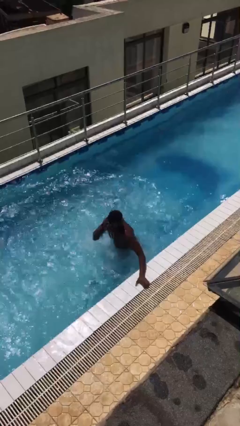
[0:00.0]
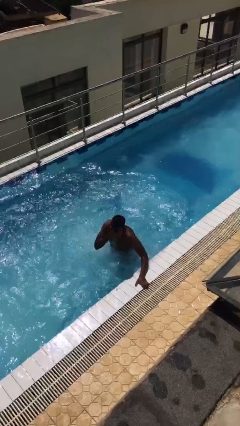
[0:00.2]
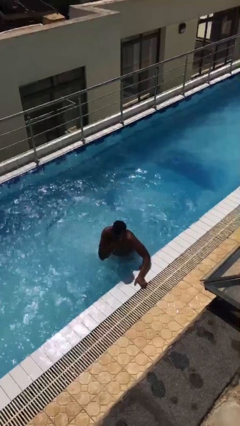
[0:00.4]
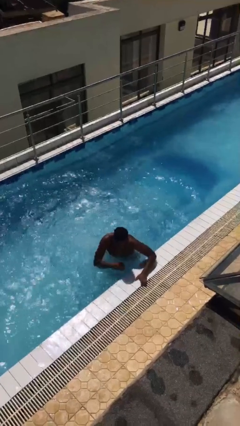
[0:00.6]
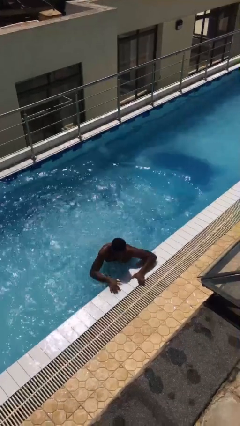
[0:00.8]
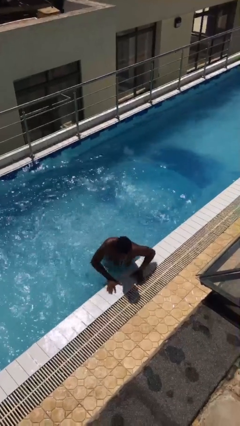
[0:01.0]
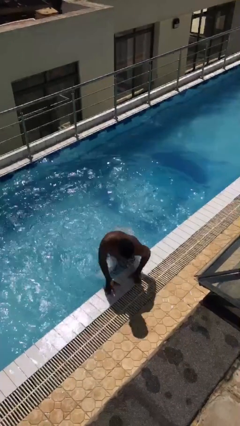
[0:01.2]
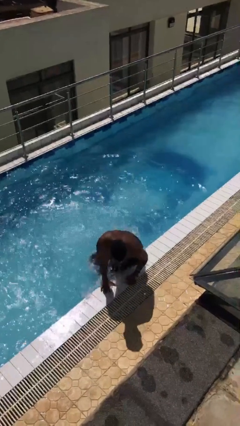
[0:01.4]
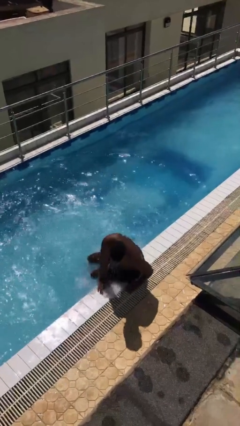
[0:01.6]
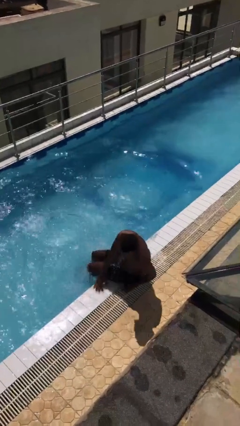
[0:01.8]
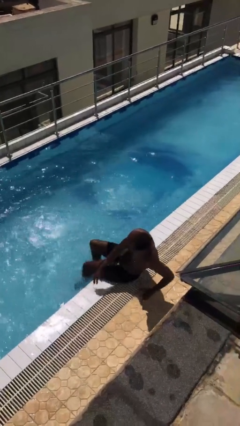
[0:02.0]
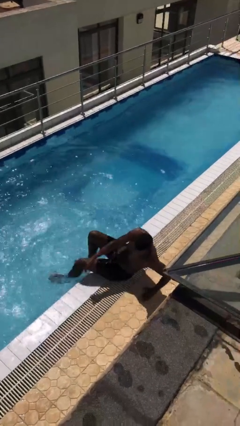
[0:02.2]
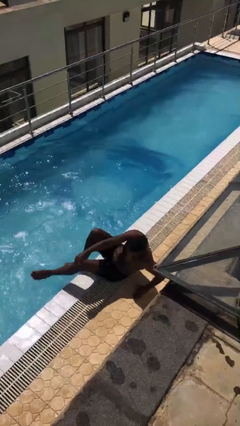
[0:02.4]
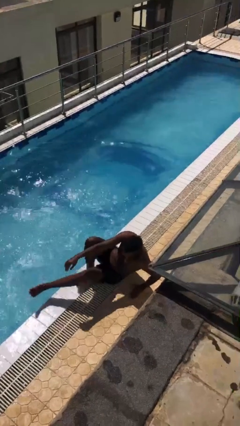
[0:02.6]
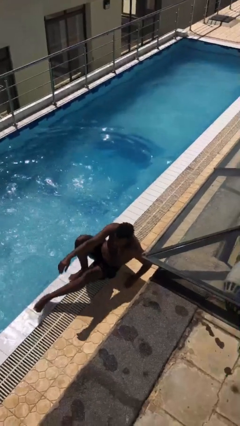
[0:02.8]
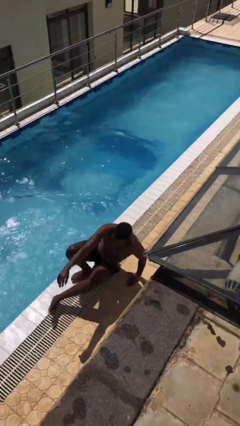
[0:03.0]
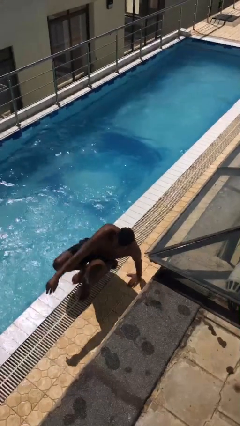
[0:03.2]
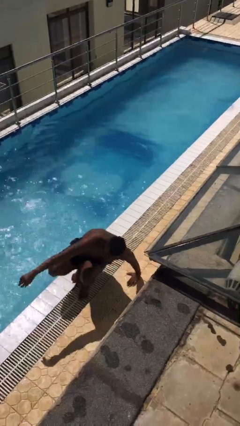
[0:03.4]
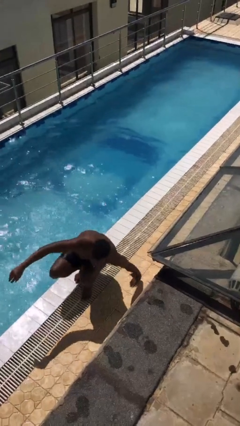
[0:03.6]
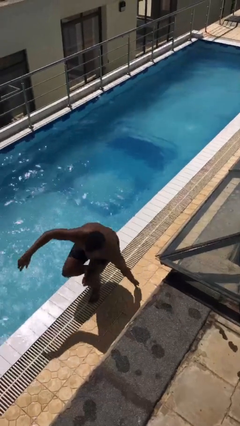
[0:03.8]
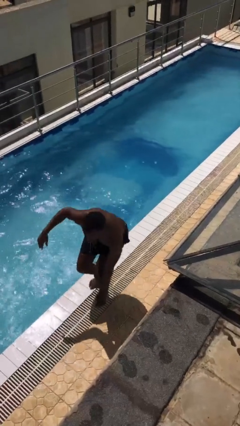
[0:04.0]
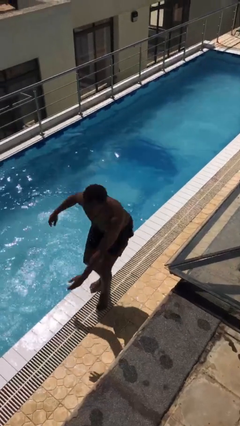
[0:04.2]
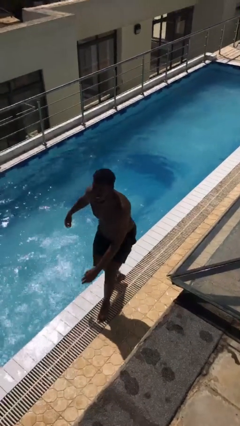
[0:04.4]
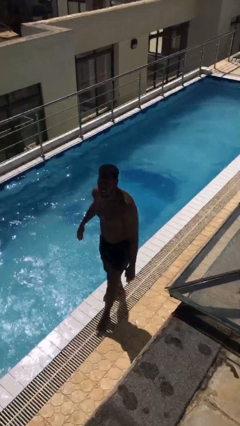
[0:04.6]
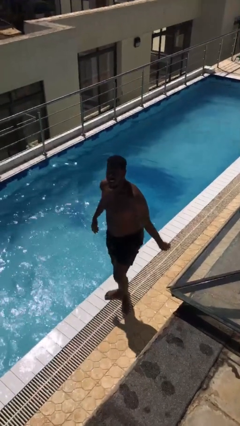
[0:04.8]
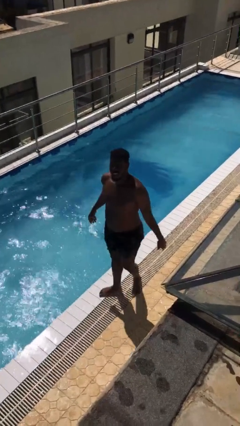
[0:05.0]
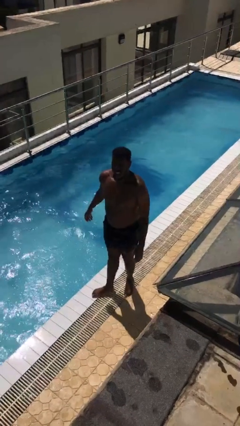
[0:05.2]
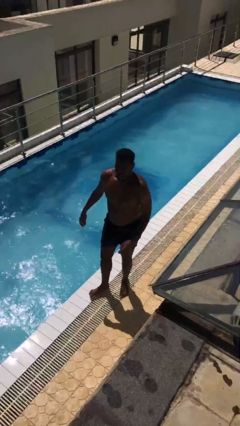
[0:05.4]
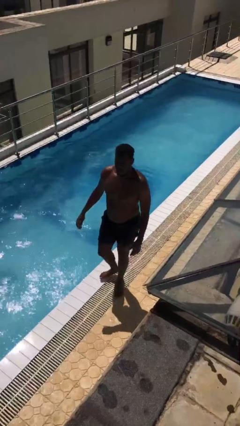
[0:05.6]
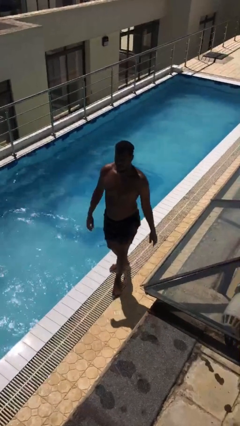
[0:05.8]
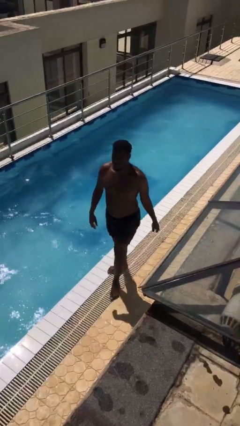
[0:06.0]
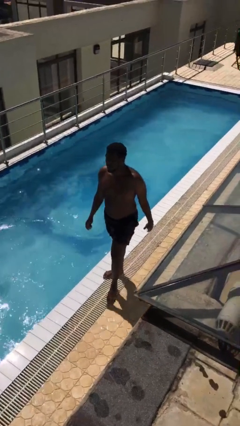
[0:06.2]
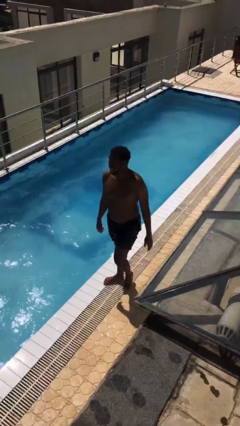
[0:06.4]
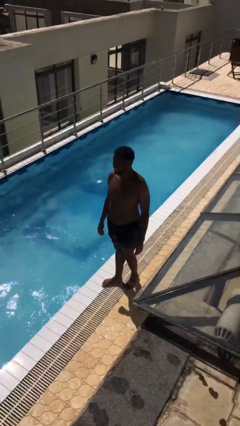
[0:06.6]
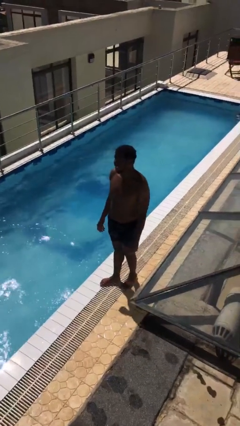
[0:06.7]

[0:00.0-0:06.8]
person exits pool

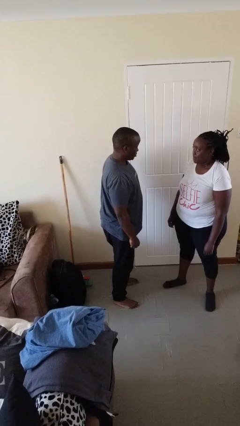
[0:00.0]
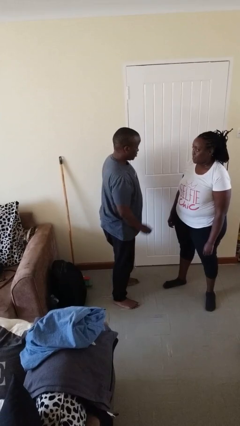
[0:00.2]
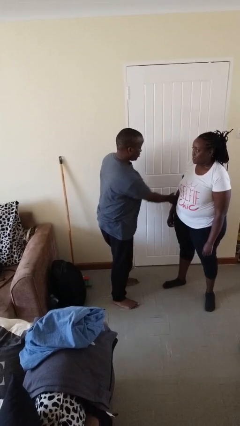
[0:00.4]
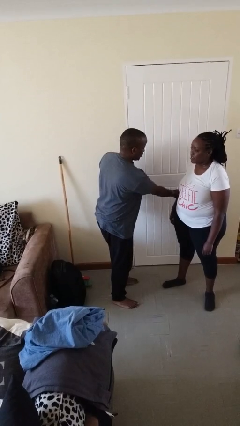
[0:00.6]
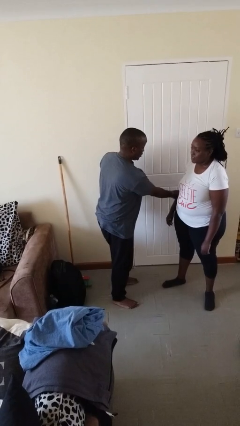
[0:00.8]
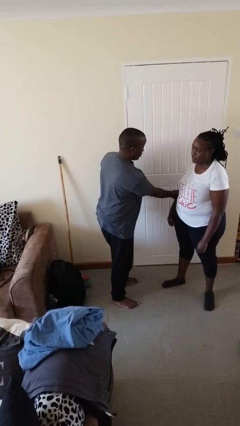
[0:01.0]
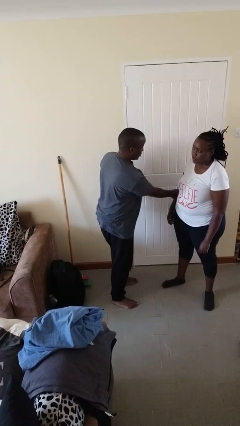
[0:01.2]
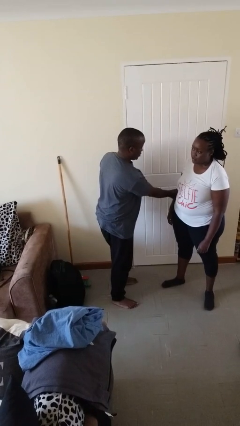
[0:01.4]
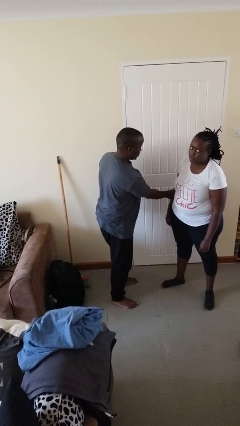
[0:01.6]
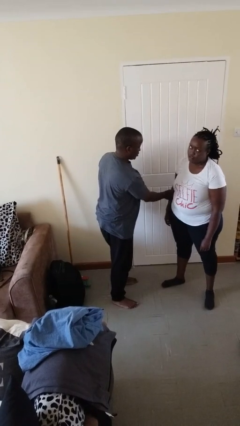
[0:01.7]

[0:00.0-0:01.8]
person grabs person by forearm

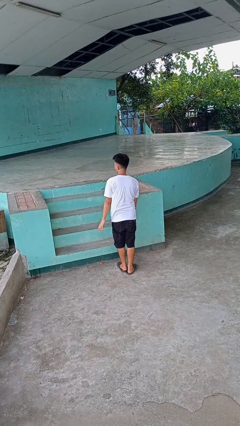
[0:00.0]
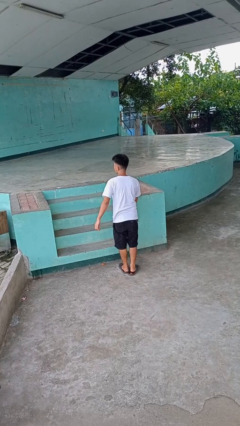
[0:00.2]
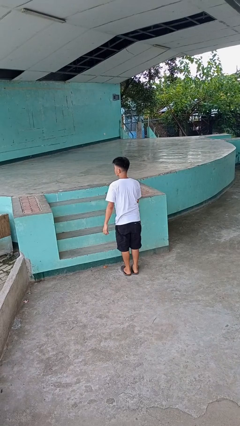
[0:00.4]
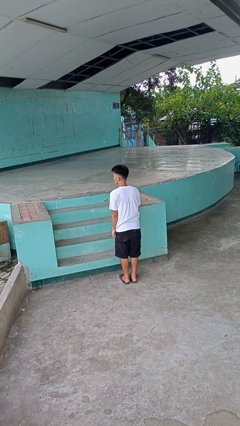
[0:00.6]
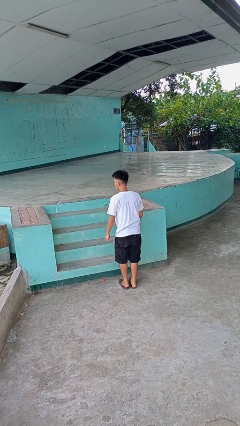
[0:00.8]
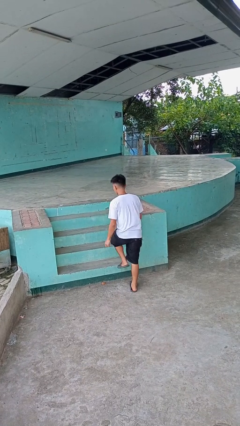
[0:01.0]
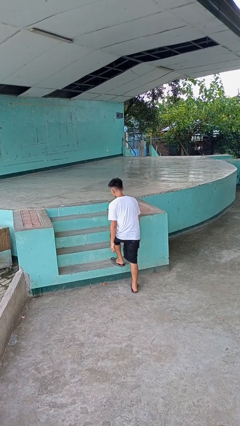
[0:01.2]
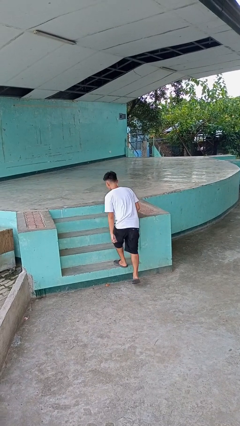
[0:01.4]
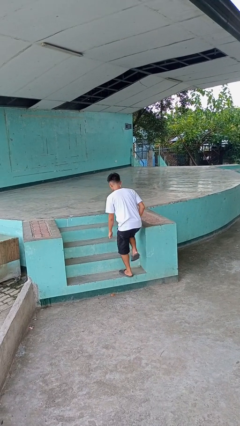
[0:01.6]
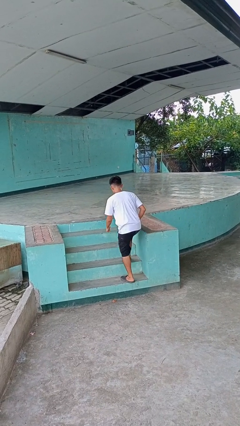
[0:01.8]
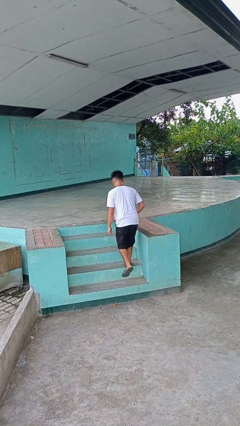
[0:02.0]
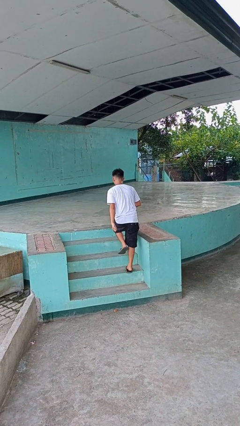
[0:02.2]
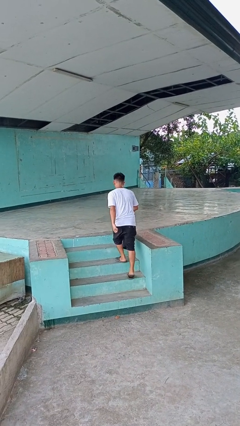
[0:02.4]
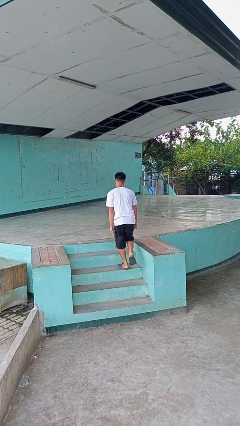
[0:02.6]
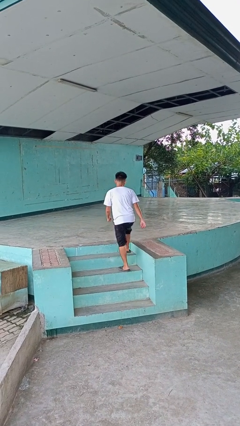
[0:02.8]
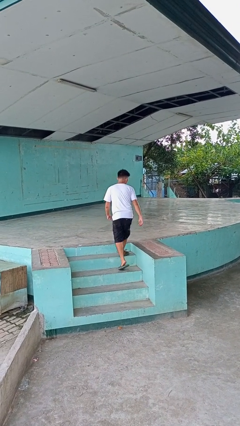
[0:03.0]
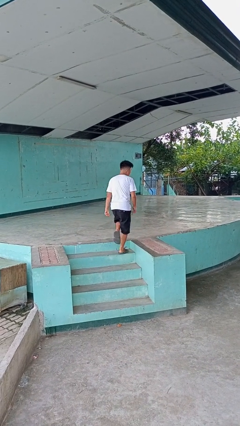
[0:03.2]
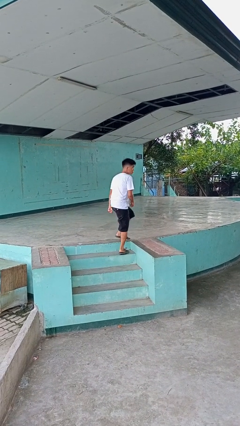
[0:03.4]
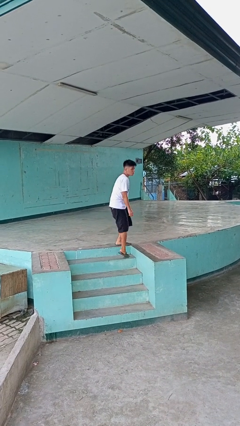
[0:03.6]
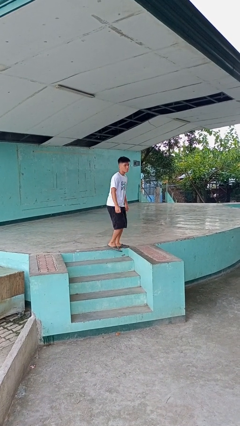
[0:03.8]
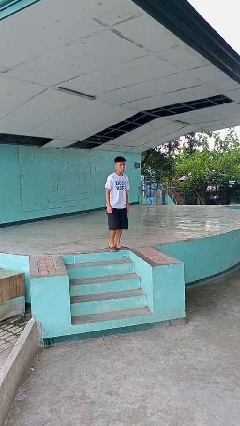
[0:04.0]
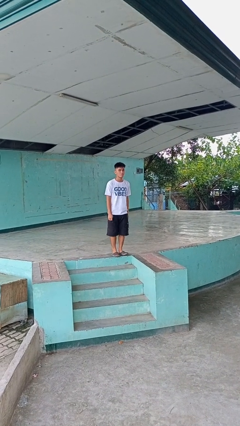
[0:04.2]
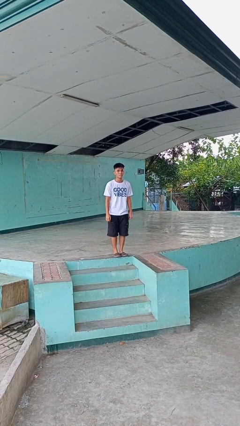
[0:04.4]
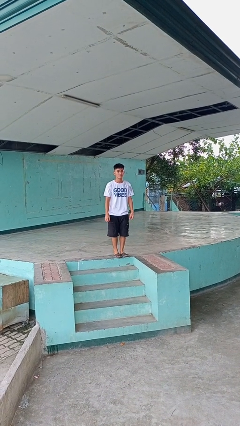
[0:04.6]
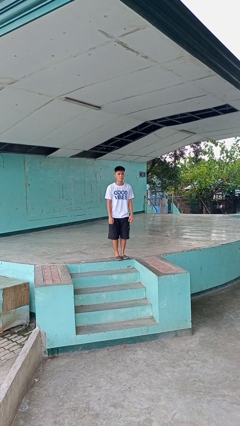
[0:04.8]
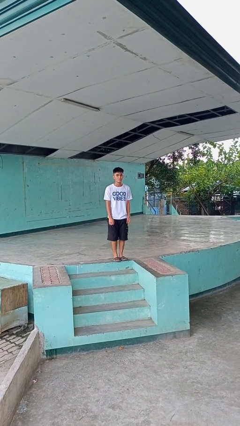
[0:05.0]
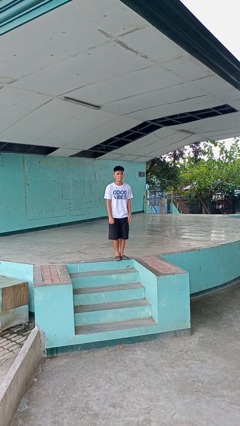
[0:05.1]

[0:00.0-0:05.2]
person climbs up stairs

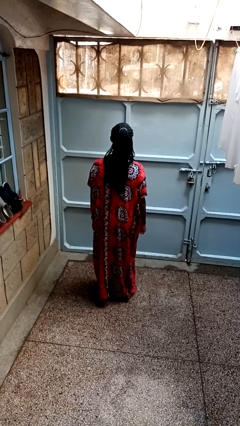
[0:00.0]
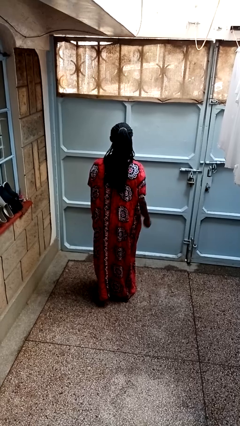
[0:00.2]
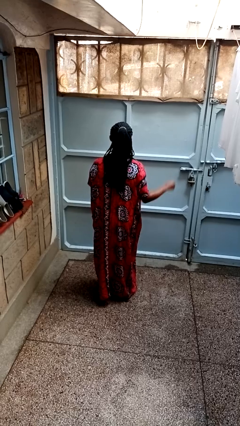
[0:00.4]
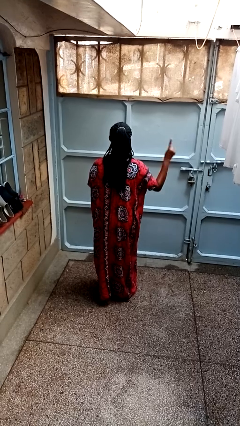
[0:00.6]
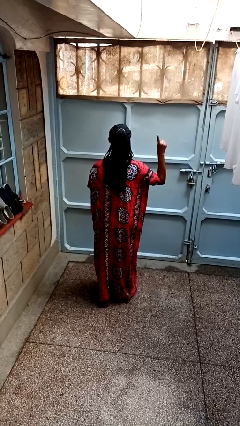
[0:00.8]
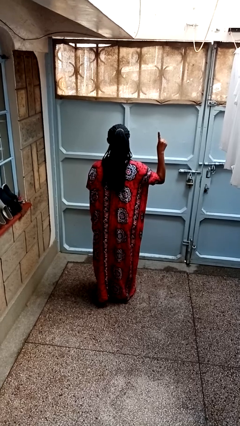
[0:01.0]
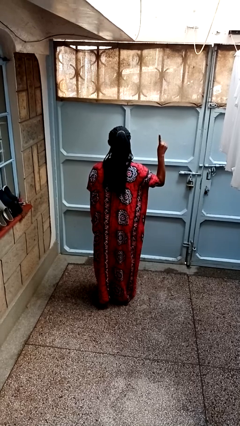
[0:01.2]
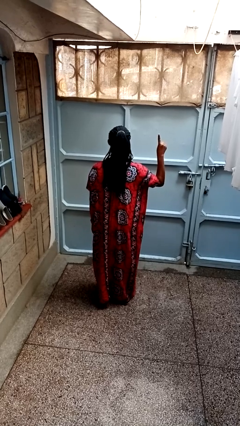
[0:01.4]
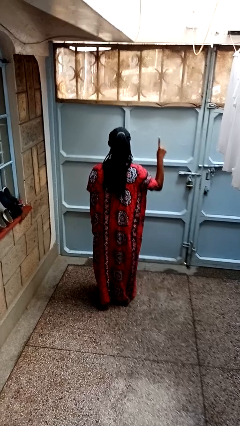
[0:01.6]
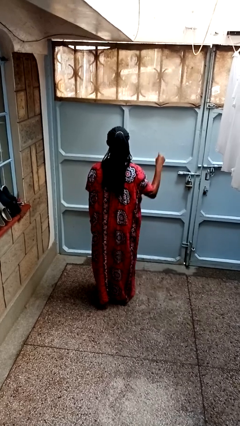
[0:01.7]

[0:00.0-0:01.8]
person gestures number one

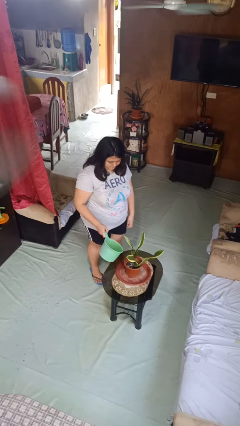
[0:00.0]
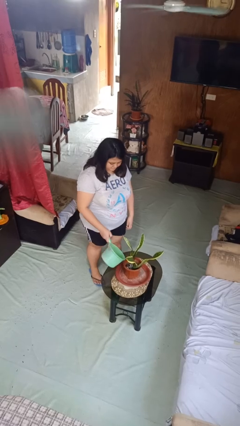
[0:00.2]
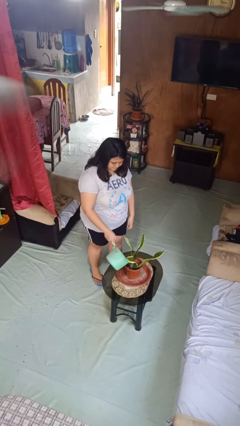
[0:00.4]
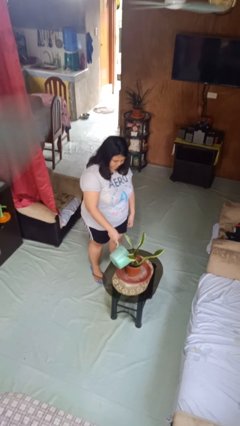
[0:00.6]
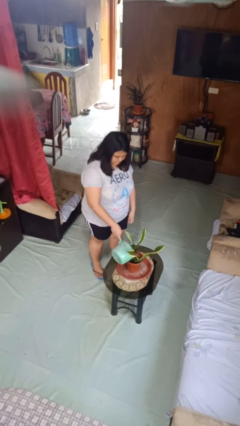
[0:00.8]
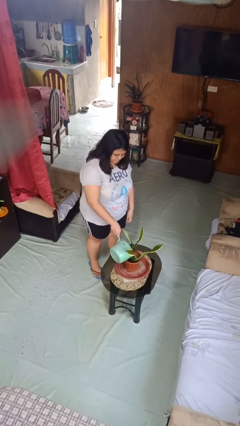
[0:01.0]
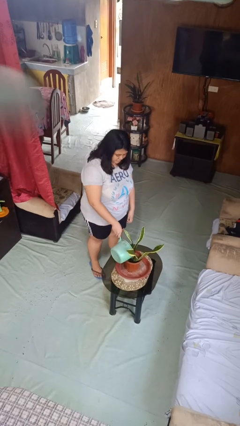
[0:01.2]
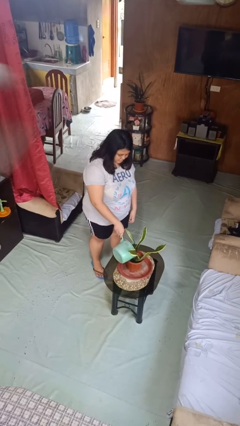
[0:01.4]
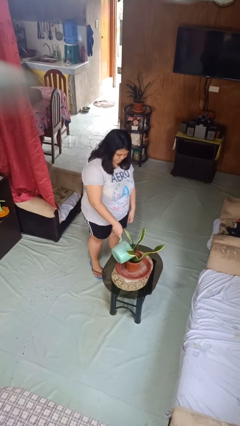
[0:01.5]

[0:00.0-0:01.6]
person waters houseplant

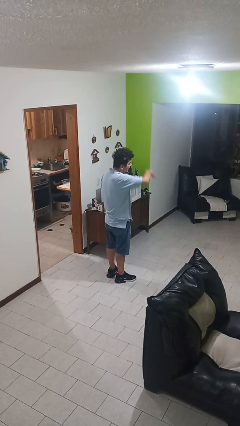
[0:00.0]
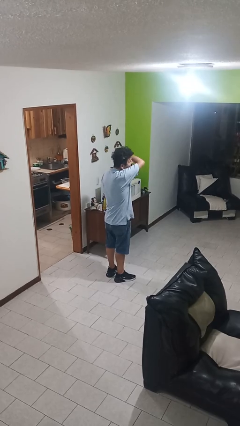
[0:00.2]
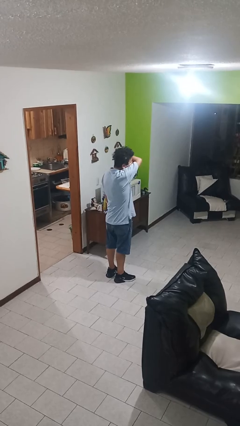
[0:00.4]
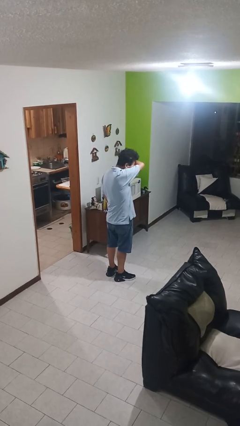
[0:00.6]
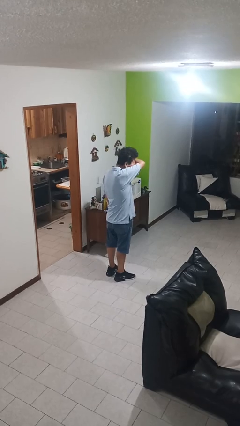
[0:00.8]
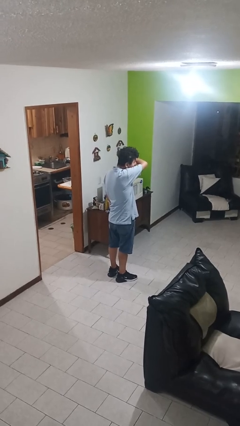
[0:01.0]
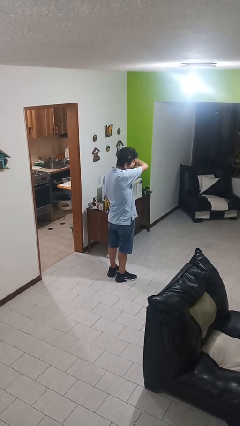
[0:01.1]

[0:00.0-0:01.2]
person sneezes into arm
